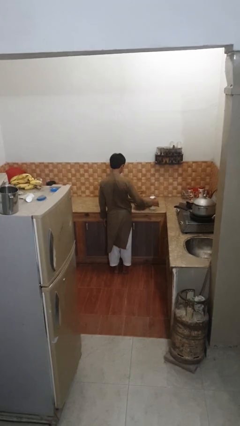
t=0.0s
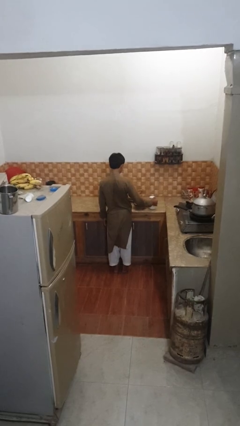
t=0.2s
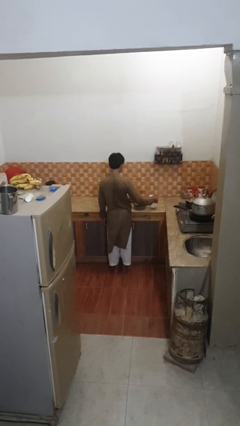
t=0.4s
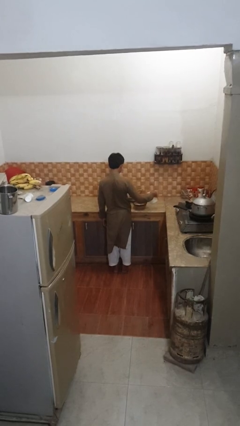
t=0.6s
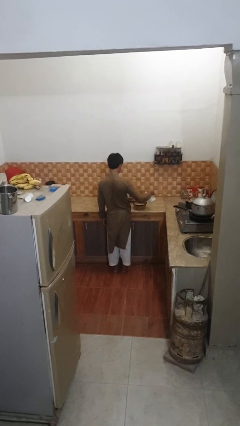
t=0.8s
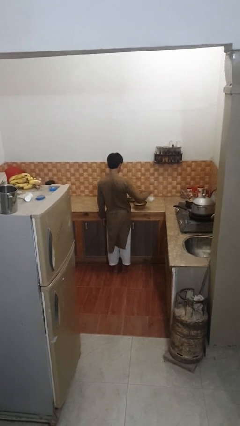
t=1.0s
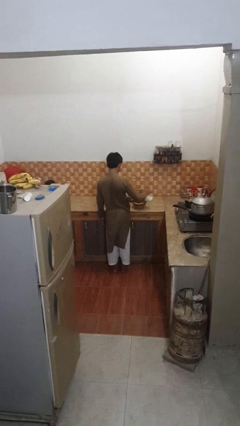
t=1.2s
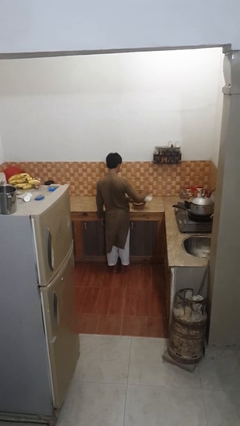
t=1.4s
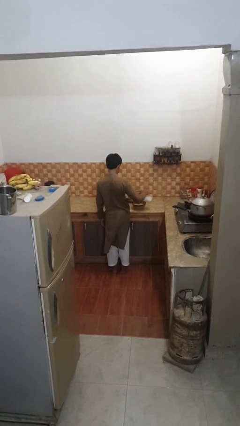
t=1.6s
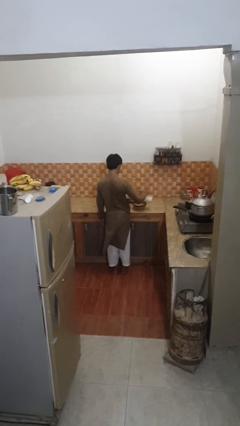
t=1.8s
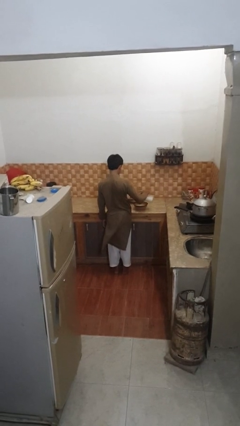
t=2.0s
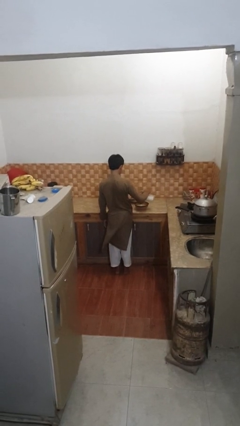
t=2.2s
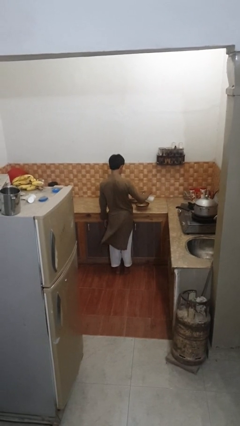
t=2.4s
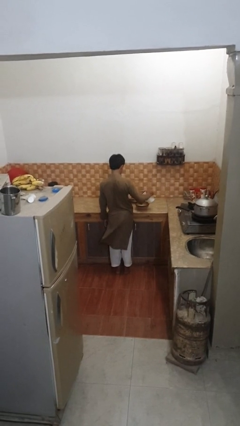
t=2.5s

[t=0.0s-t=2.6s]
person pours into bowl

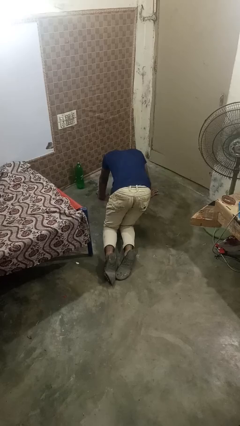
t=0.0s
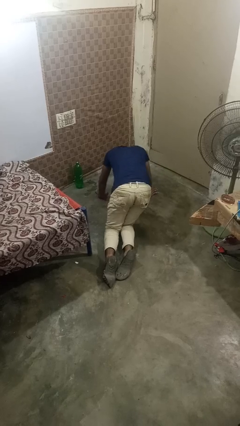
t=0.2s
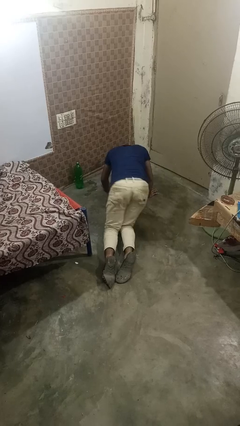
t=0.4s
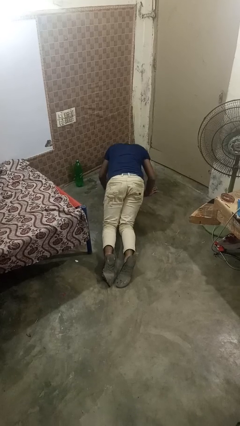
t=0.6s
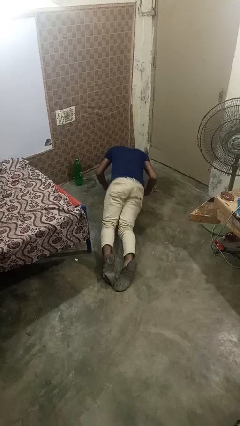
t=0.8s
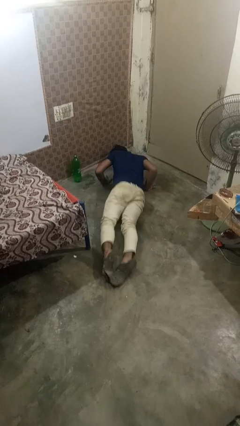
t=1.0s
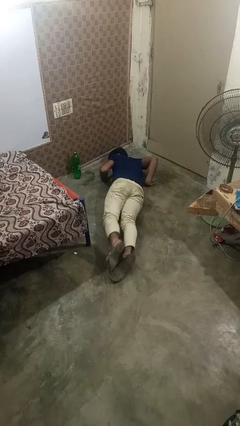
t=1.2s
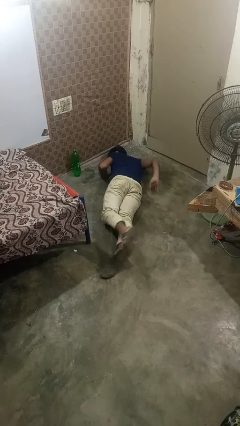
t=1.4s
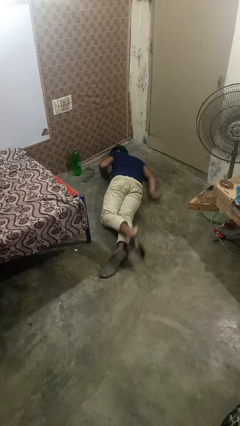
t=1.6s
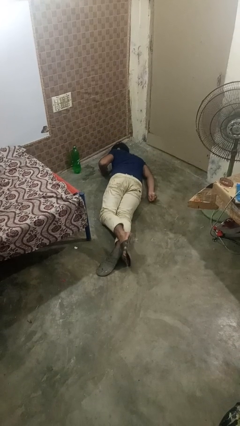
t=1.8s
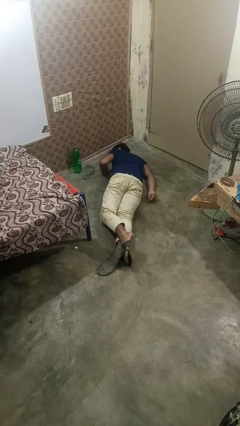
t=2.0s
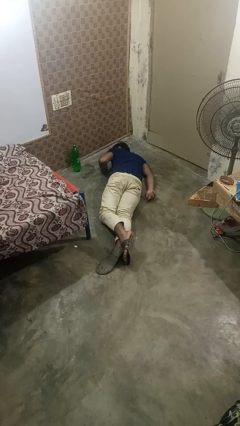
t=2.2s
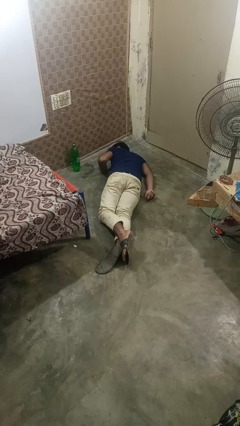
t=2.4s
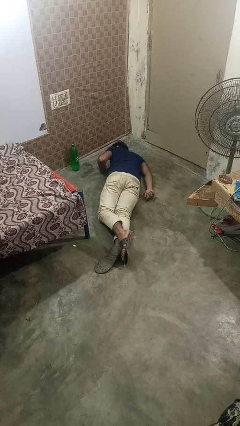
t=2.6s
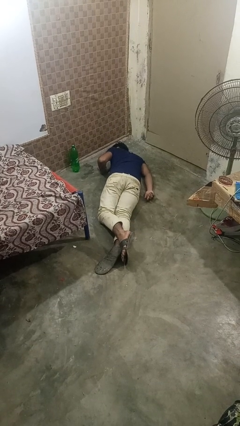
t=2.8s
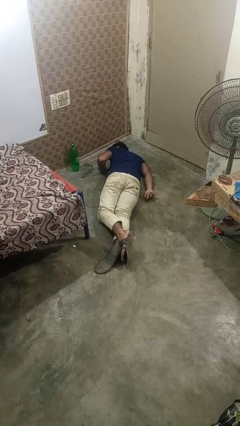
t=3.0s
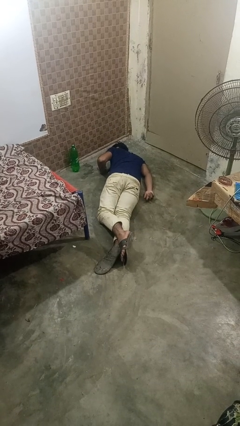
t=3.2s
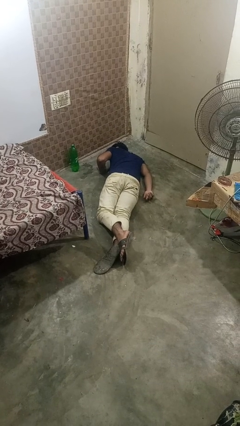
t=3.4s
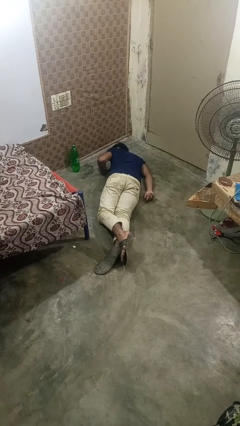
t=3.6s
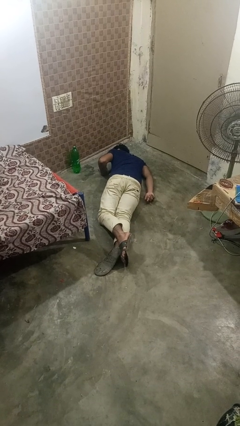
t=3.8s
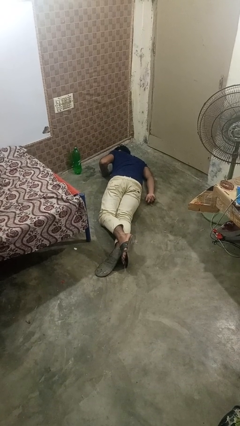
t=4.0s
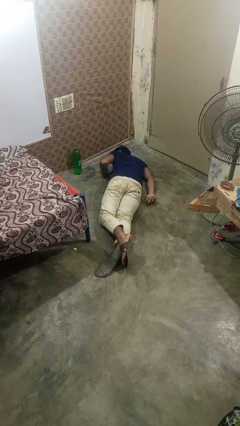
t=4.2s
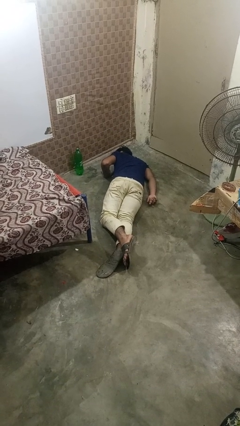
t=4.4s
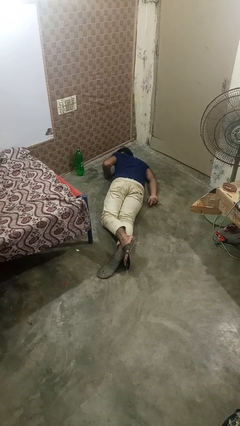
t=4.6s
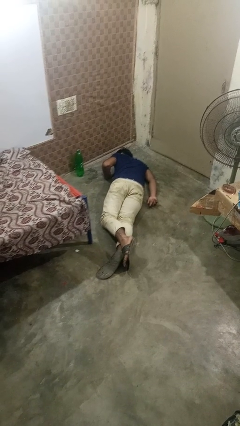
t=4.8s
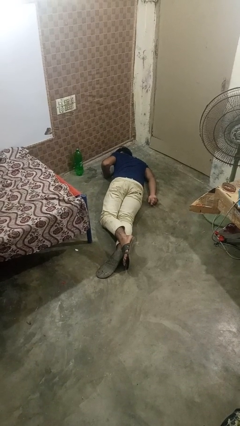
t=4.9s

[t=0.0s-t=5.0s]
person lies down on floor

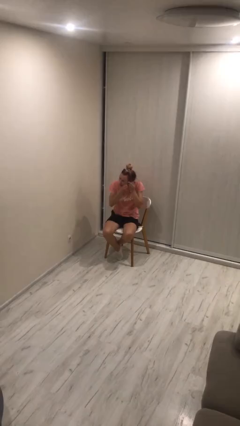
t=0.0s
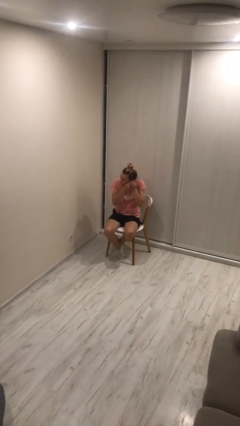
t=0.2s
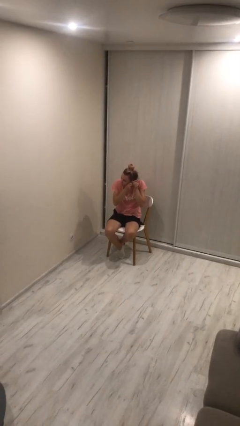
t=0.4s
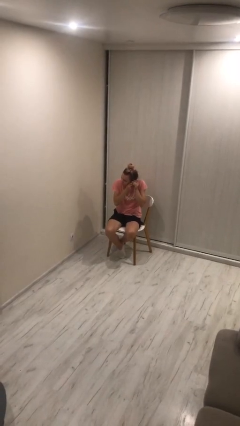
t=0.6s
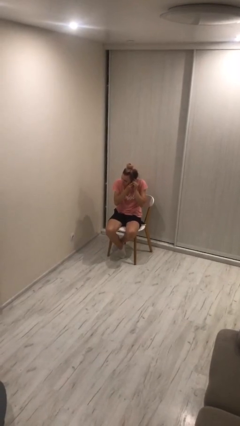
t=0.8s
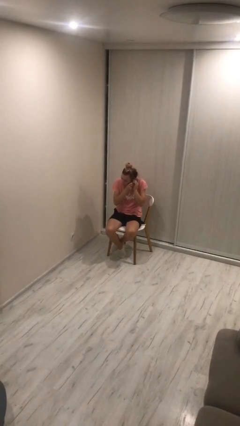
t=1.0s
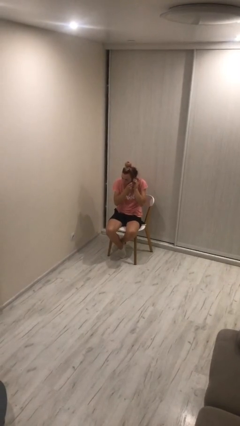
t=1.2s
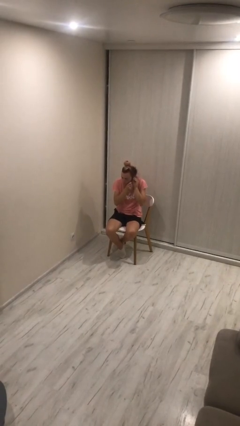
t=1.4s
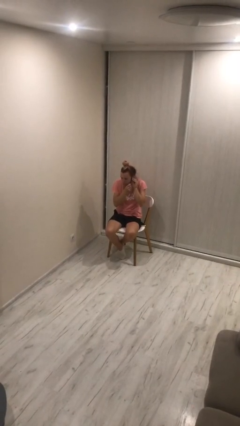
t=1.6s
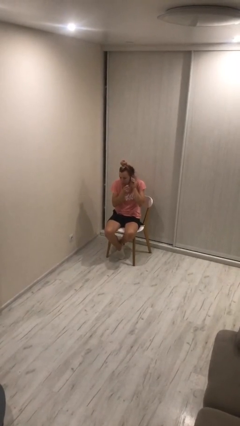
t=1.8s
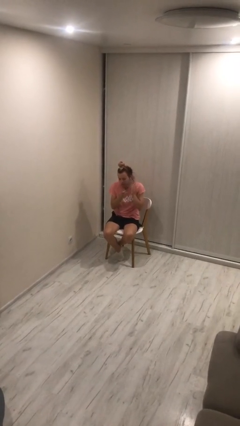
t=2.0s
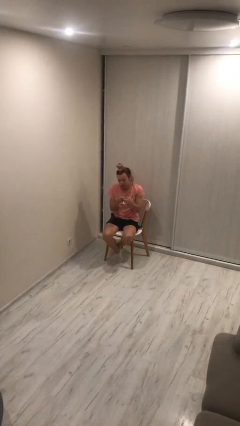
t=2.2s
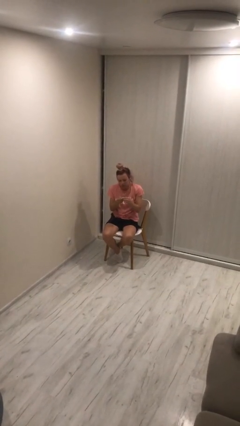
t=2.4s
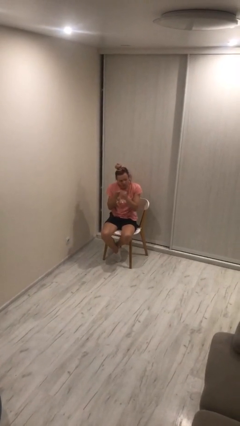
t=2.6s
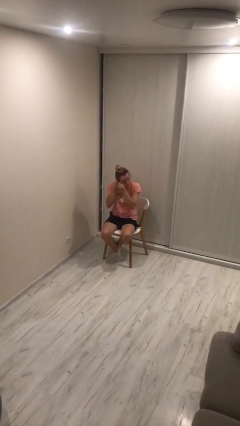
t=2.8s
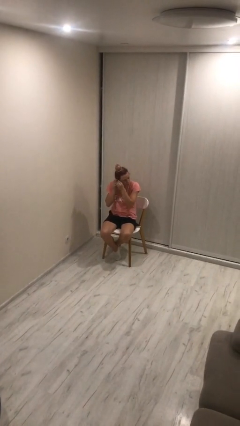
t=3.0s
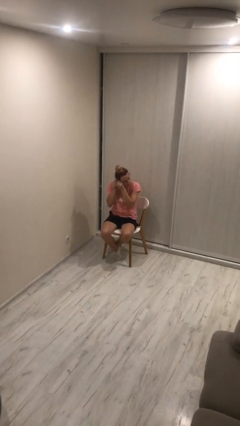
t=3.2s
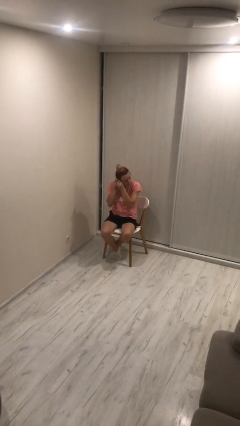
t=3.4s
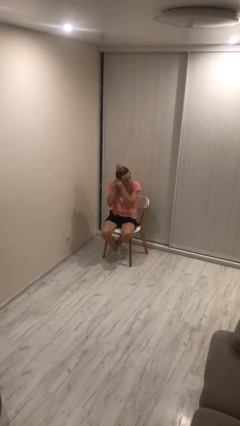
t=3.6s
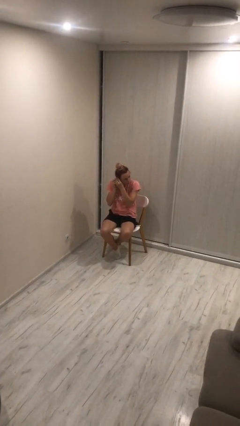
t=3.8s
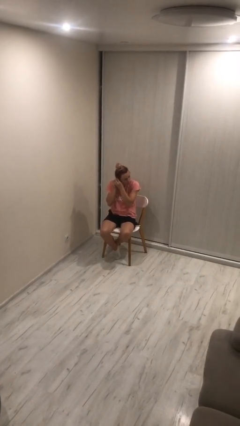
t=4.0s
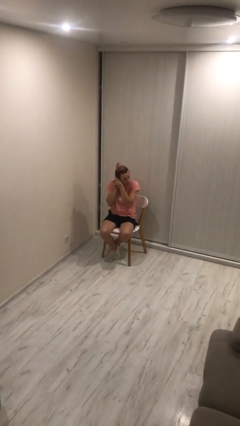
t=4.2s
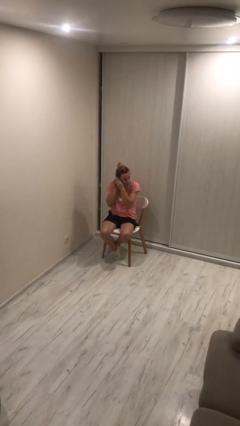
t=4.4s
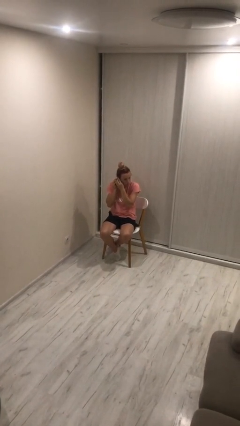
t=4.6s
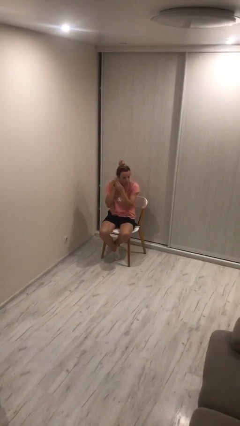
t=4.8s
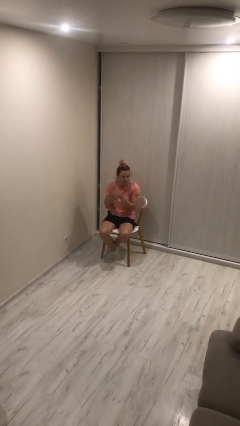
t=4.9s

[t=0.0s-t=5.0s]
person puts on earrings

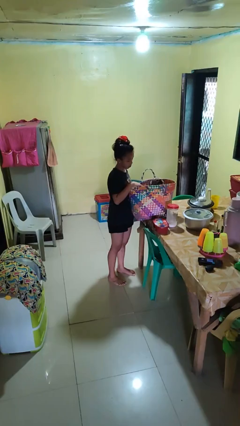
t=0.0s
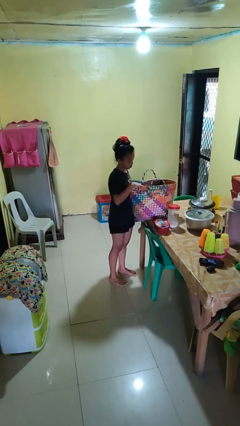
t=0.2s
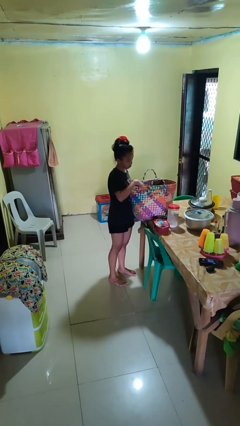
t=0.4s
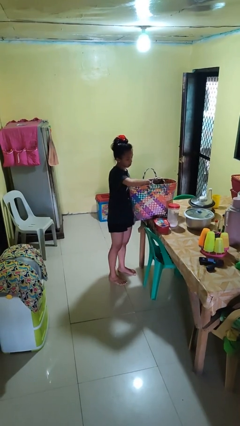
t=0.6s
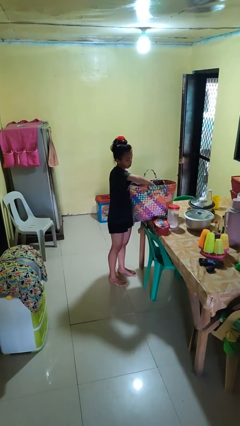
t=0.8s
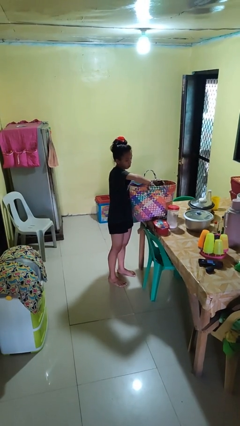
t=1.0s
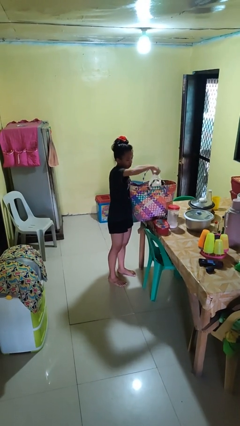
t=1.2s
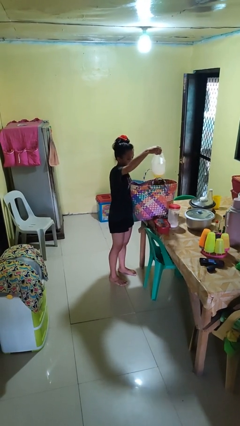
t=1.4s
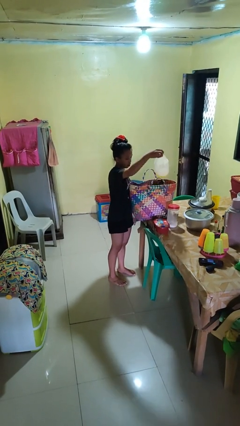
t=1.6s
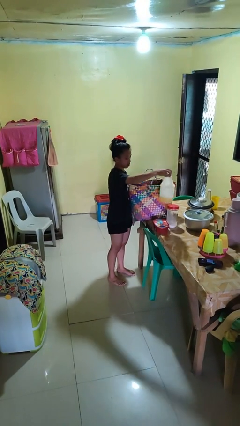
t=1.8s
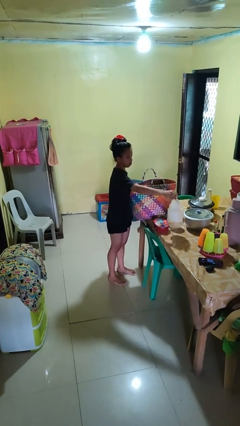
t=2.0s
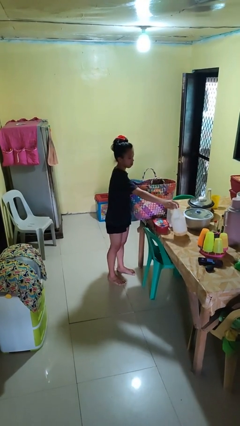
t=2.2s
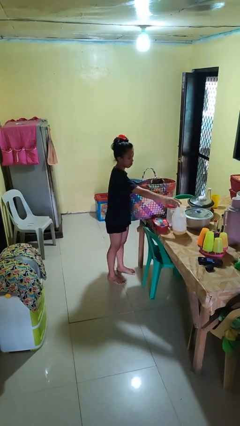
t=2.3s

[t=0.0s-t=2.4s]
person takes object from basket

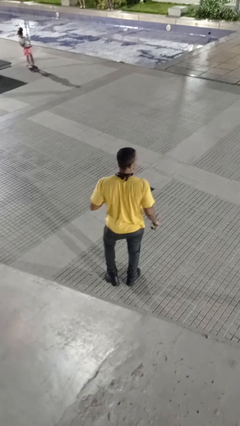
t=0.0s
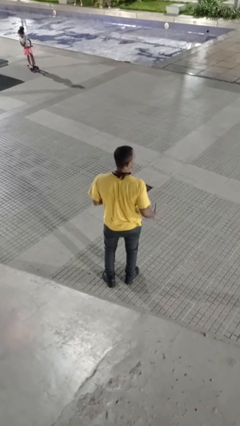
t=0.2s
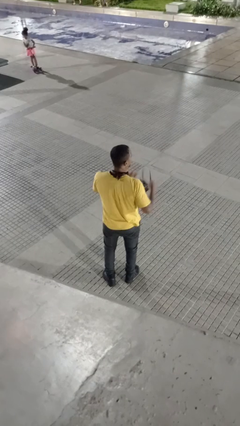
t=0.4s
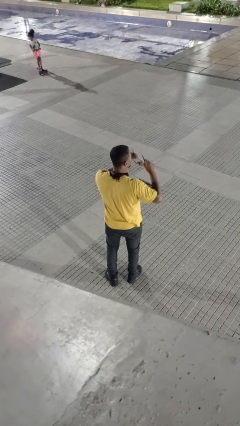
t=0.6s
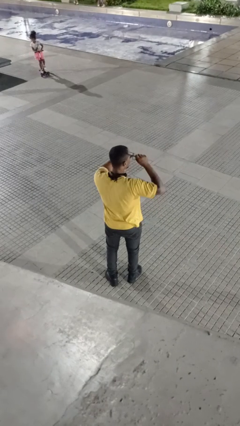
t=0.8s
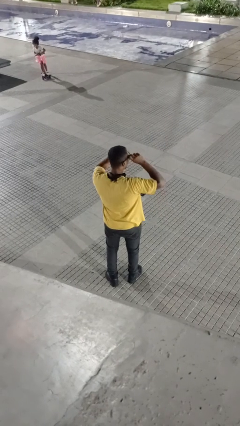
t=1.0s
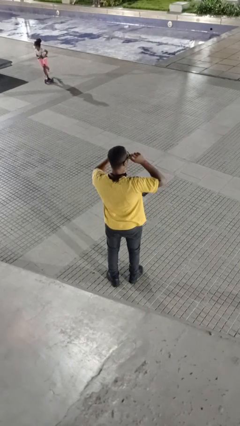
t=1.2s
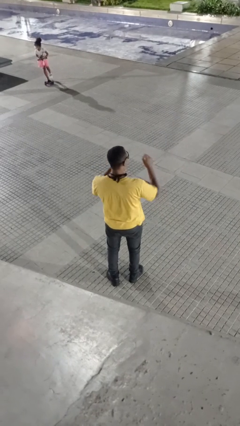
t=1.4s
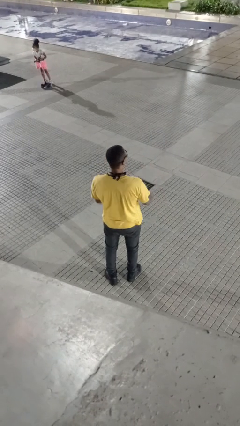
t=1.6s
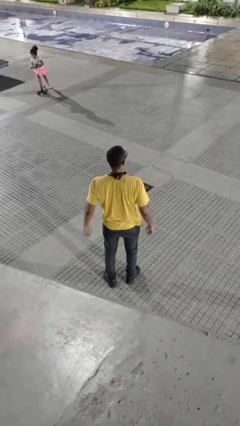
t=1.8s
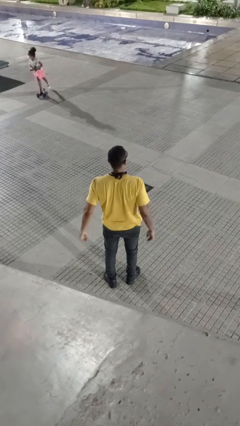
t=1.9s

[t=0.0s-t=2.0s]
person puts on glasses

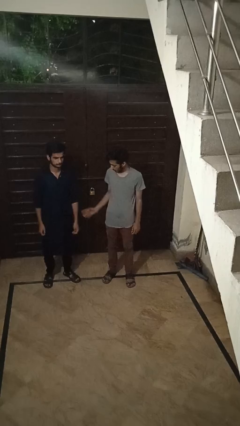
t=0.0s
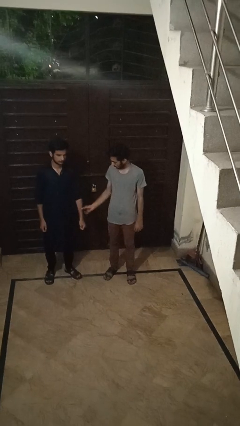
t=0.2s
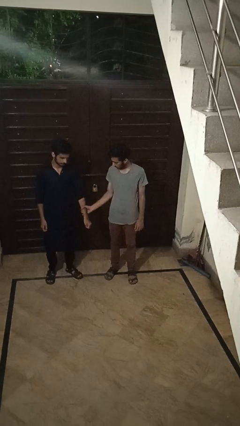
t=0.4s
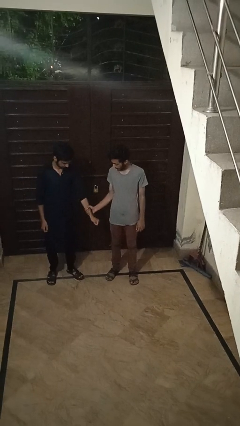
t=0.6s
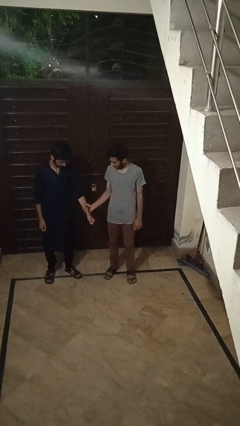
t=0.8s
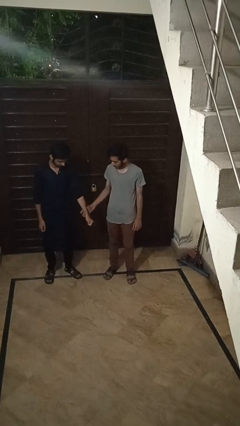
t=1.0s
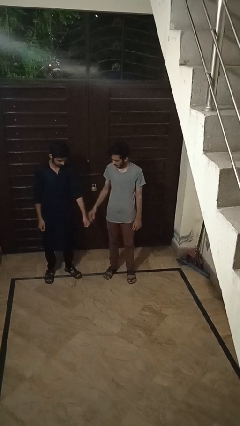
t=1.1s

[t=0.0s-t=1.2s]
person grabs person by forearm
